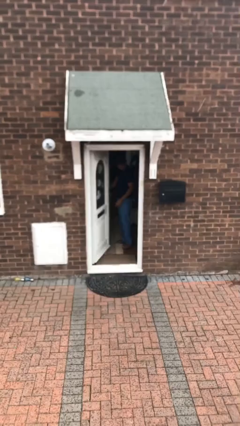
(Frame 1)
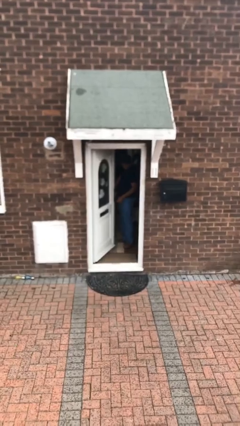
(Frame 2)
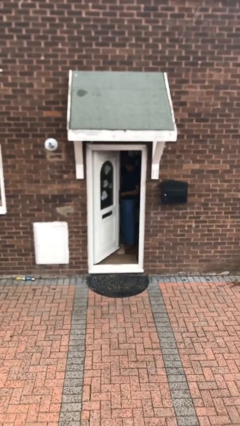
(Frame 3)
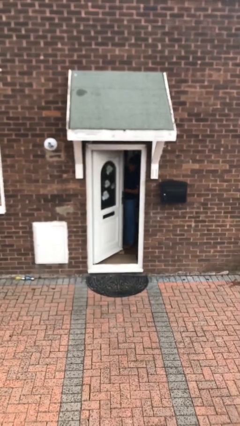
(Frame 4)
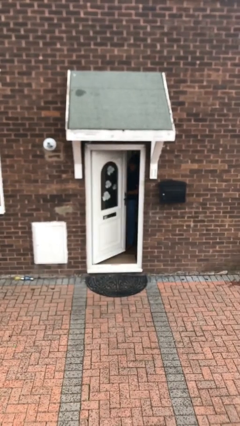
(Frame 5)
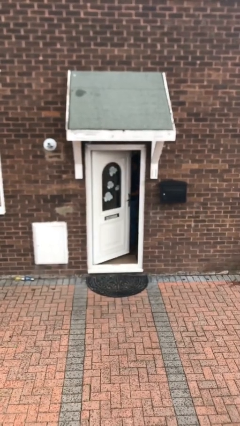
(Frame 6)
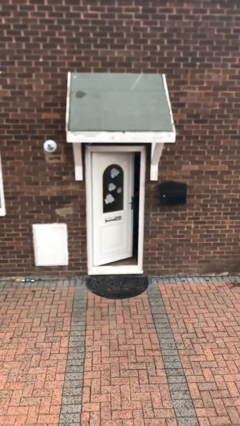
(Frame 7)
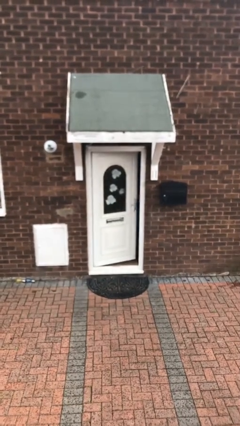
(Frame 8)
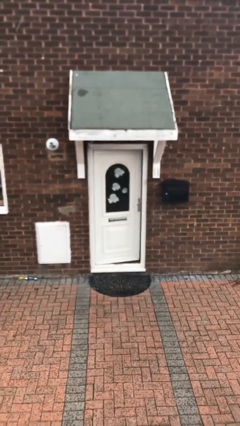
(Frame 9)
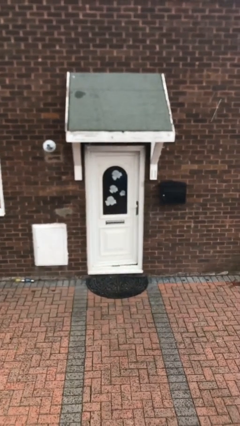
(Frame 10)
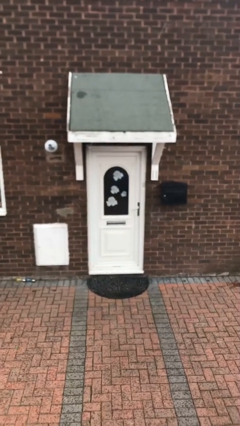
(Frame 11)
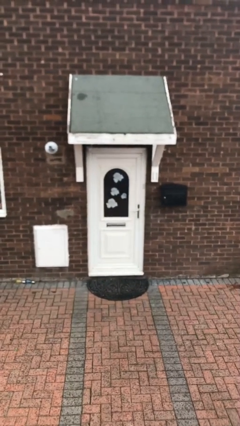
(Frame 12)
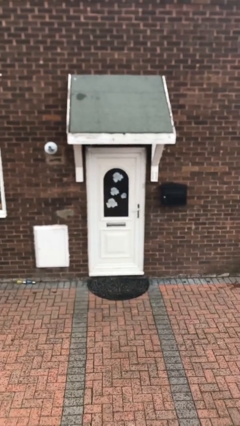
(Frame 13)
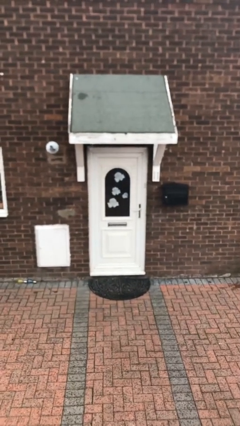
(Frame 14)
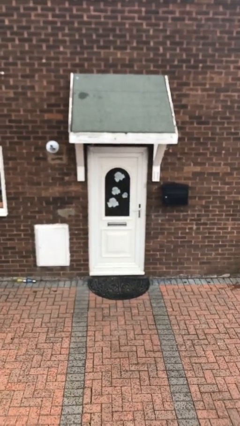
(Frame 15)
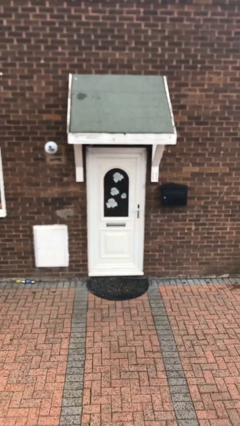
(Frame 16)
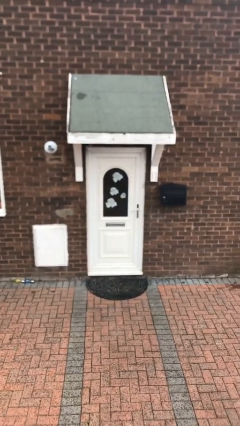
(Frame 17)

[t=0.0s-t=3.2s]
person closes facility door

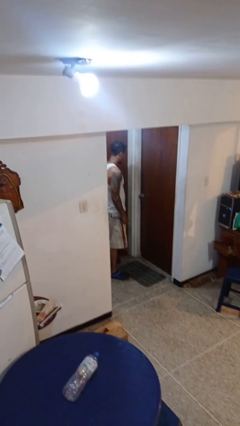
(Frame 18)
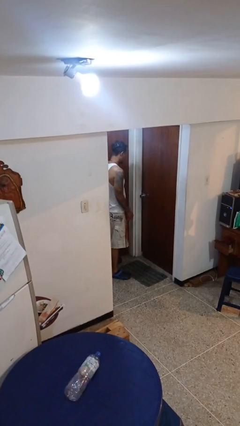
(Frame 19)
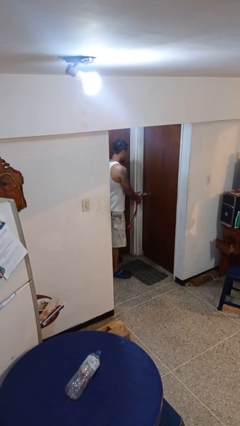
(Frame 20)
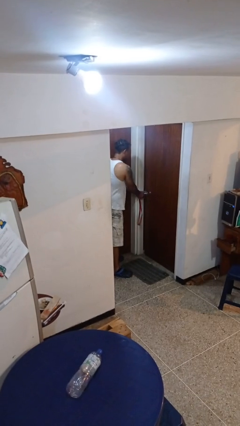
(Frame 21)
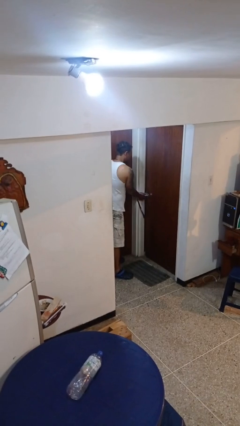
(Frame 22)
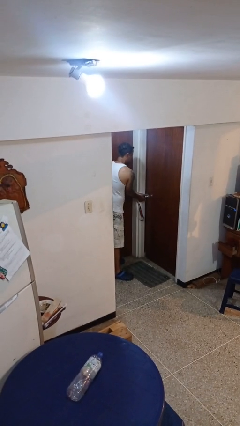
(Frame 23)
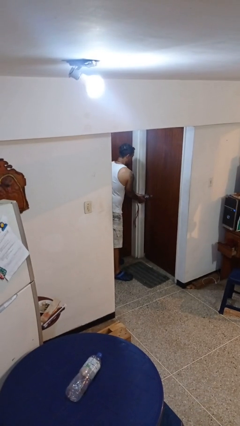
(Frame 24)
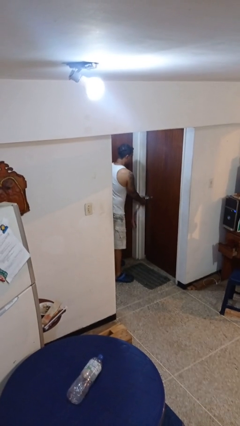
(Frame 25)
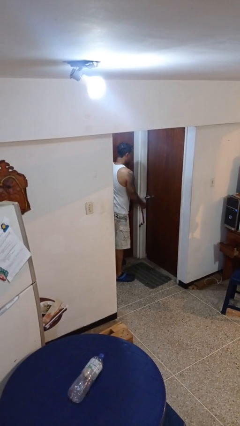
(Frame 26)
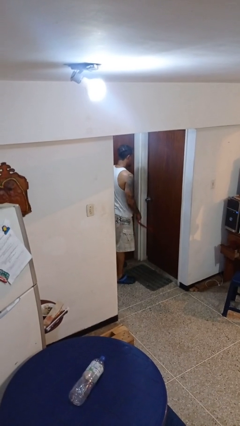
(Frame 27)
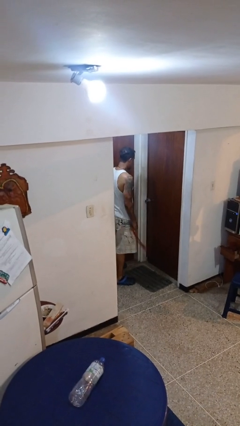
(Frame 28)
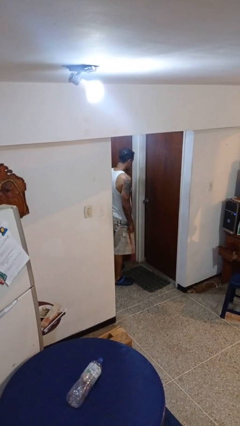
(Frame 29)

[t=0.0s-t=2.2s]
person locks door with keys

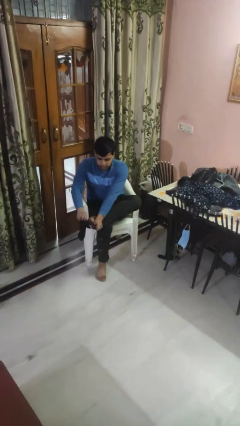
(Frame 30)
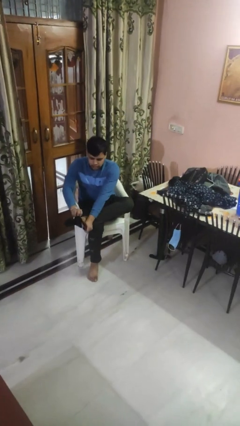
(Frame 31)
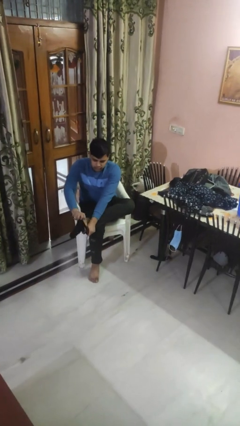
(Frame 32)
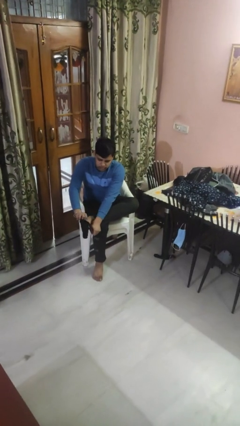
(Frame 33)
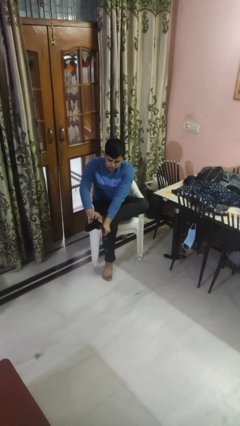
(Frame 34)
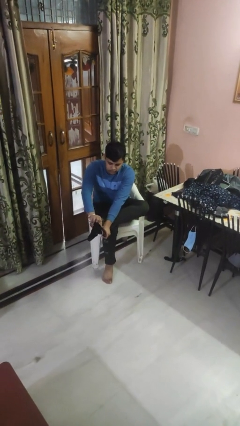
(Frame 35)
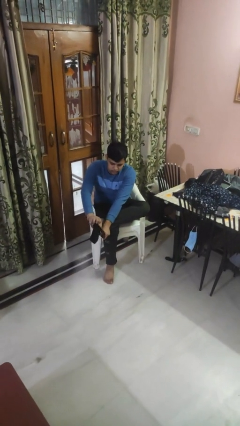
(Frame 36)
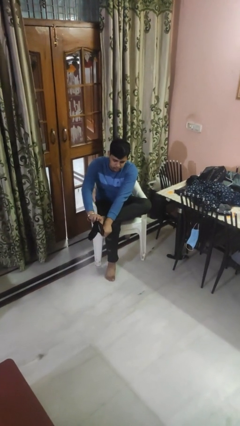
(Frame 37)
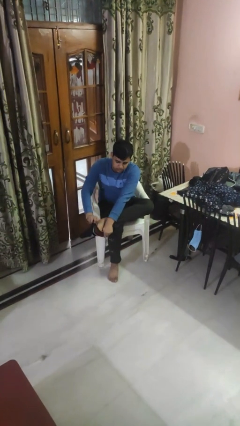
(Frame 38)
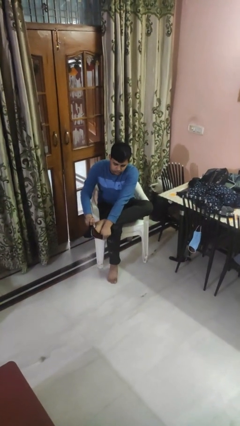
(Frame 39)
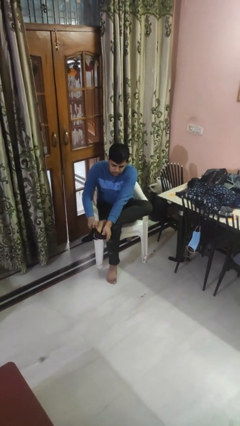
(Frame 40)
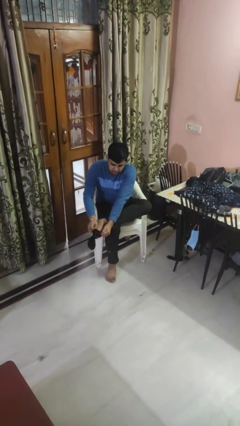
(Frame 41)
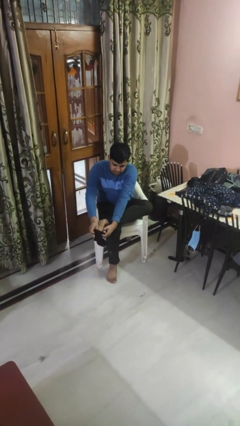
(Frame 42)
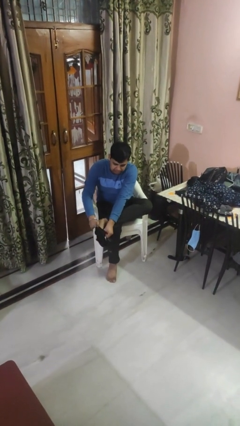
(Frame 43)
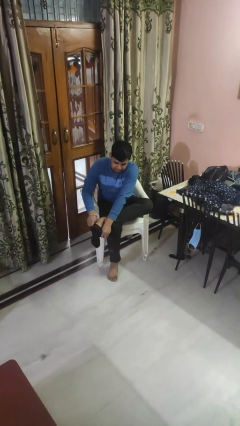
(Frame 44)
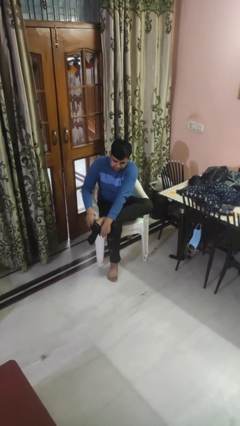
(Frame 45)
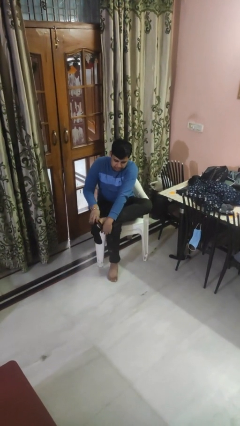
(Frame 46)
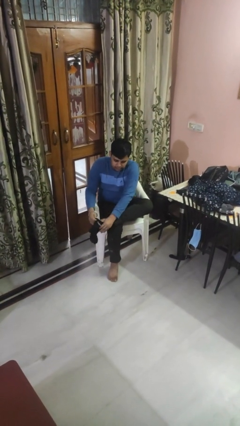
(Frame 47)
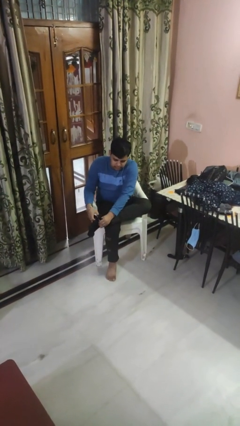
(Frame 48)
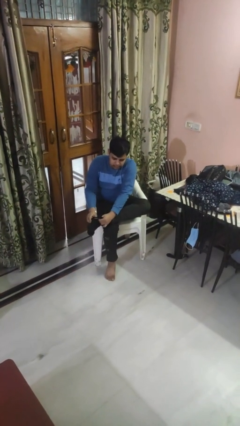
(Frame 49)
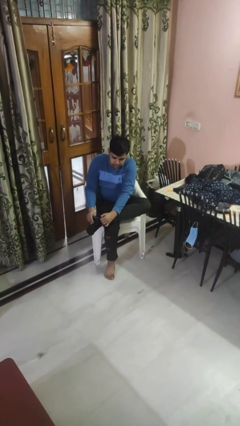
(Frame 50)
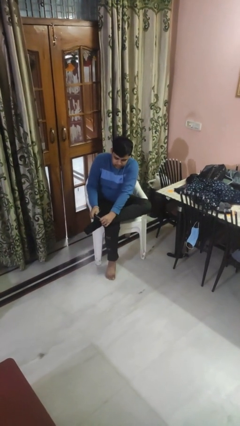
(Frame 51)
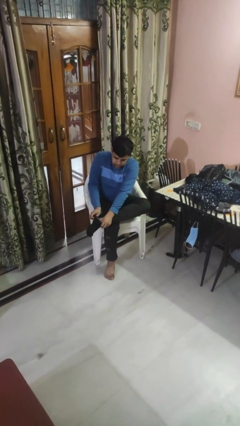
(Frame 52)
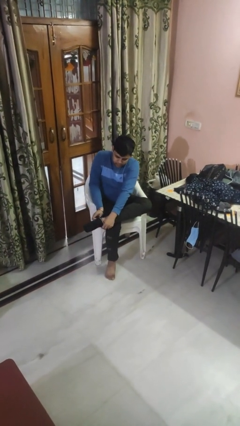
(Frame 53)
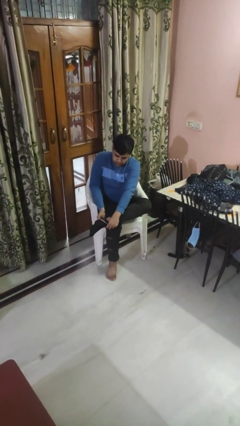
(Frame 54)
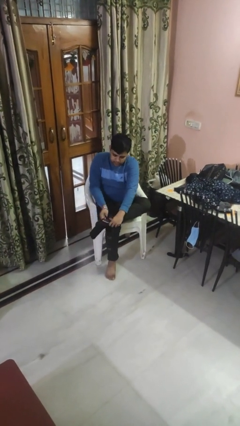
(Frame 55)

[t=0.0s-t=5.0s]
person puts on socks

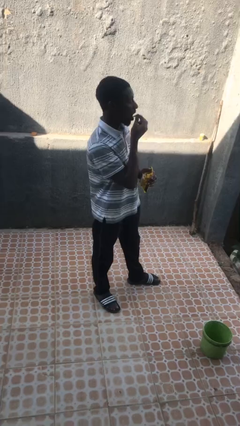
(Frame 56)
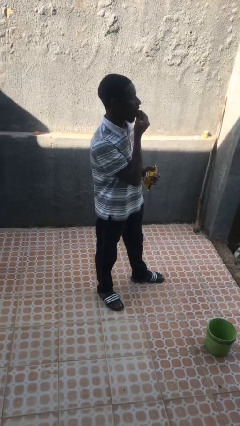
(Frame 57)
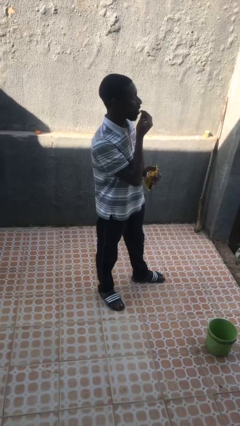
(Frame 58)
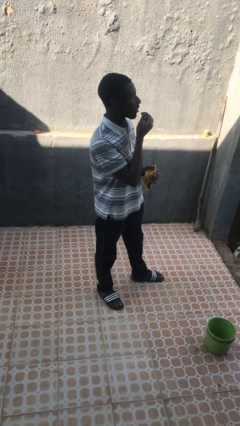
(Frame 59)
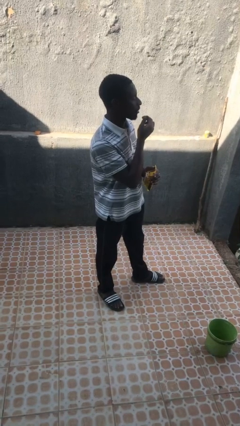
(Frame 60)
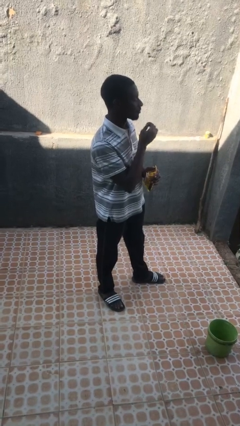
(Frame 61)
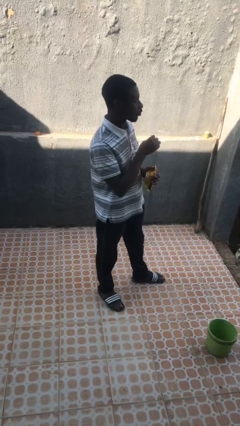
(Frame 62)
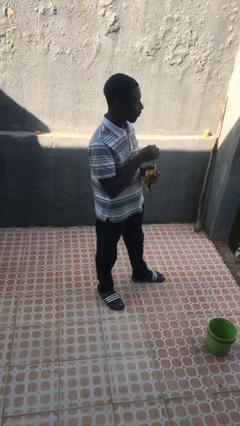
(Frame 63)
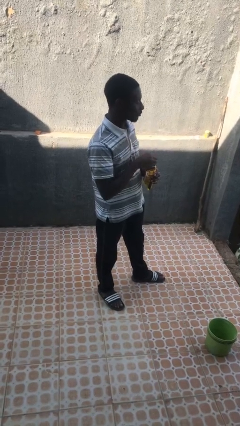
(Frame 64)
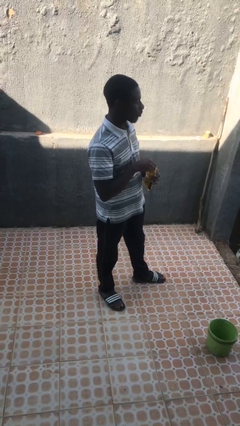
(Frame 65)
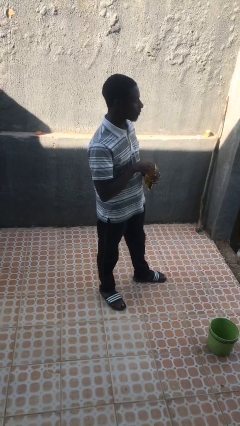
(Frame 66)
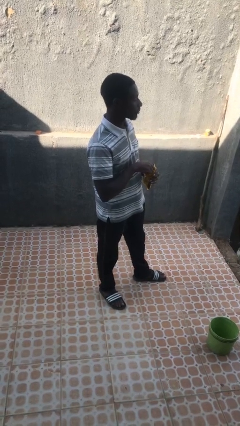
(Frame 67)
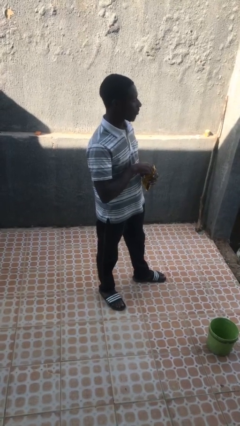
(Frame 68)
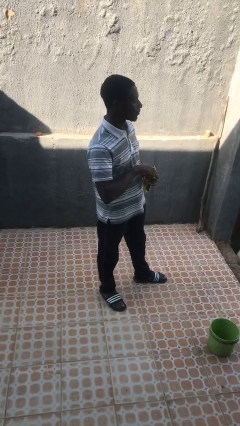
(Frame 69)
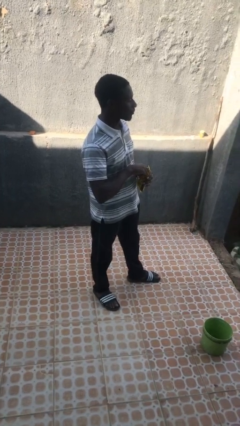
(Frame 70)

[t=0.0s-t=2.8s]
person eats snack from bag

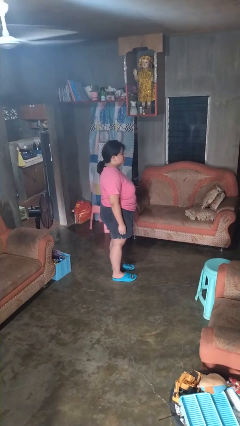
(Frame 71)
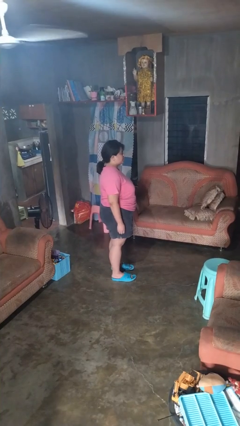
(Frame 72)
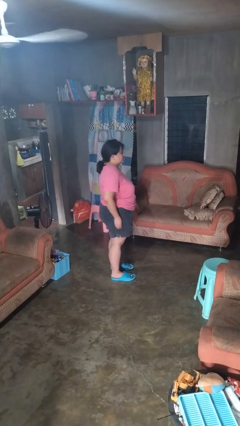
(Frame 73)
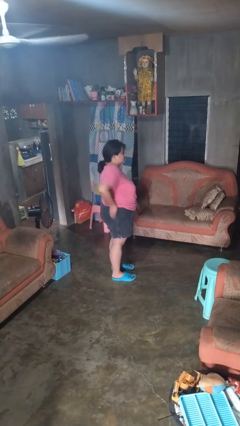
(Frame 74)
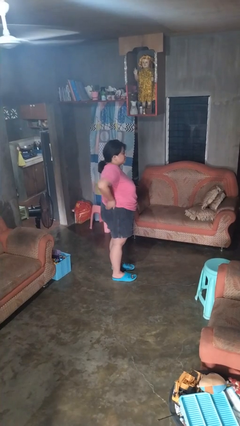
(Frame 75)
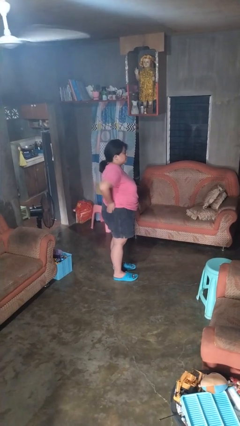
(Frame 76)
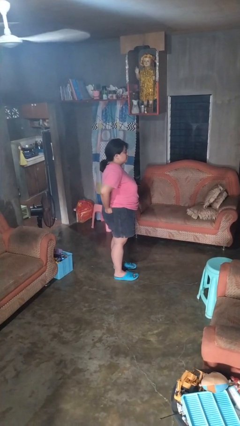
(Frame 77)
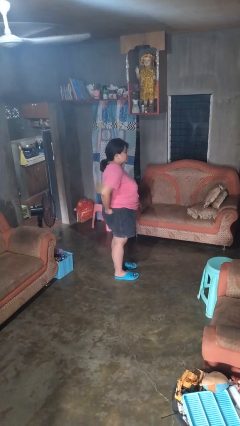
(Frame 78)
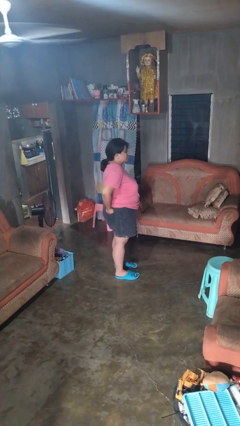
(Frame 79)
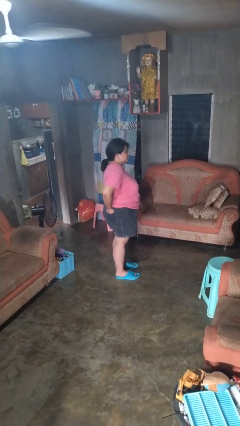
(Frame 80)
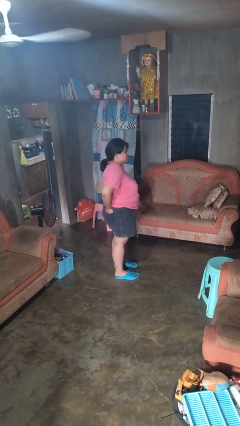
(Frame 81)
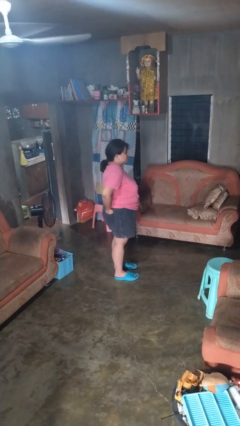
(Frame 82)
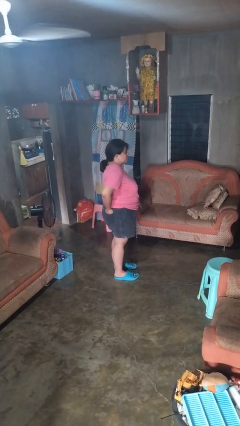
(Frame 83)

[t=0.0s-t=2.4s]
person puts hands in back pockets

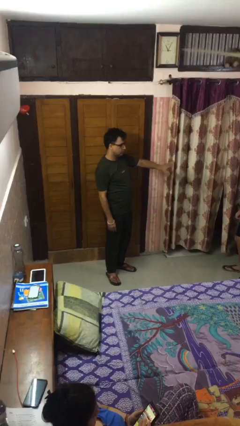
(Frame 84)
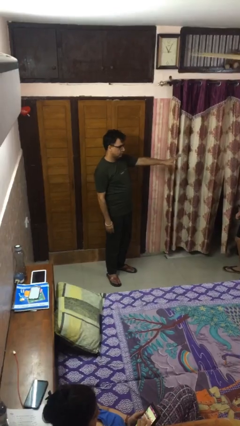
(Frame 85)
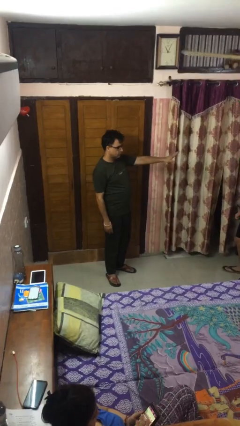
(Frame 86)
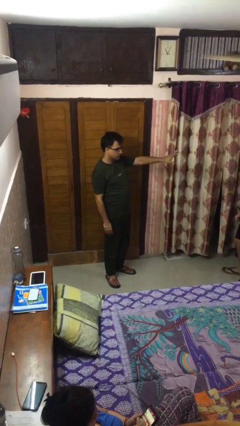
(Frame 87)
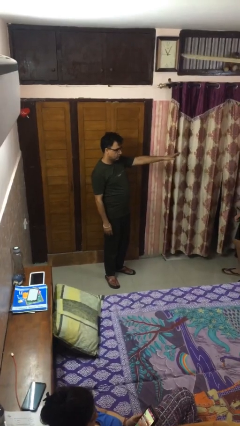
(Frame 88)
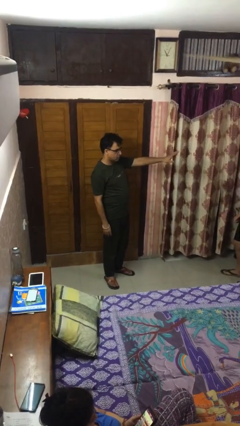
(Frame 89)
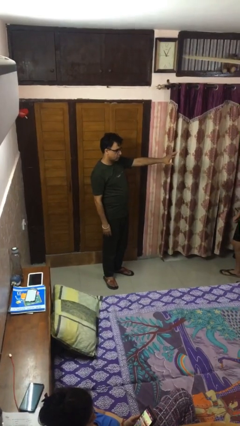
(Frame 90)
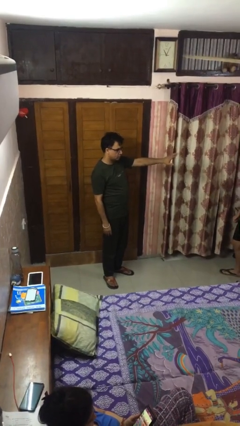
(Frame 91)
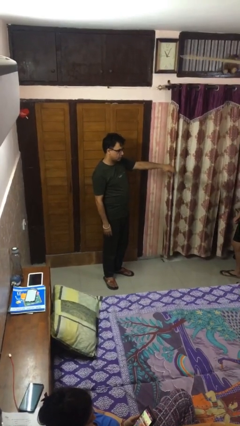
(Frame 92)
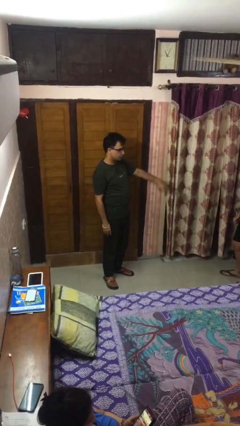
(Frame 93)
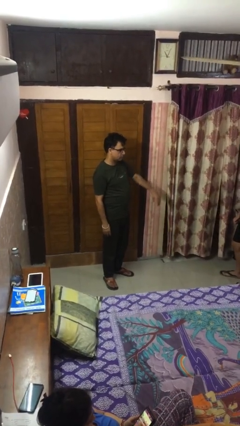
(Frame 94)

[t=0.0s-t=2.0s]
person waves at person
